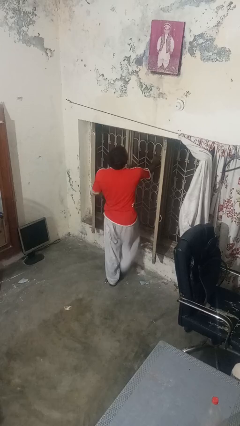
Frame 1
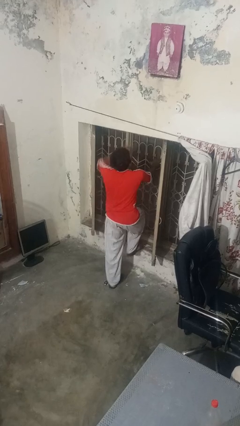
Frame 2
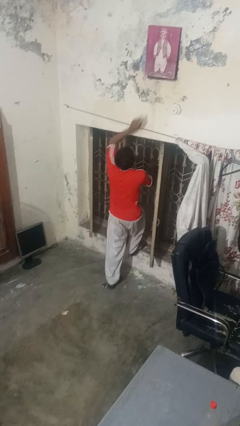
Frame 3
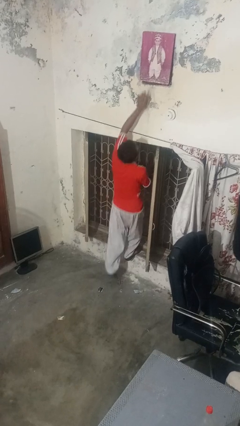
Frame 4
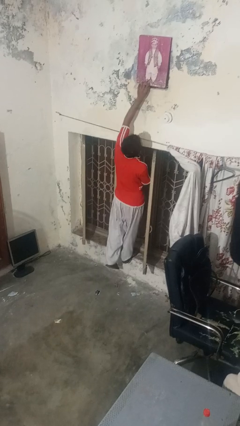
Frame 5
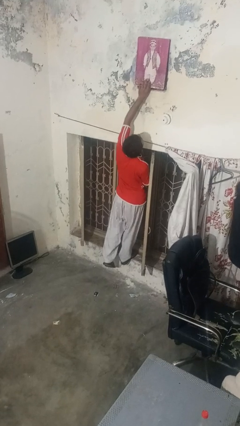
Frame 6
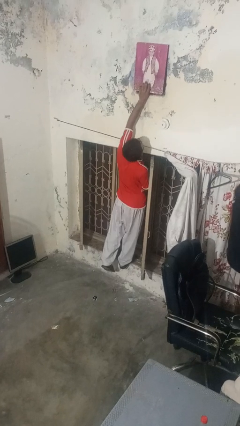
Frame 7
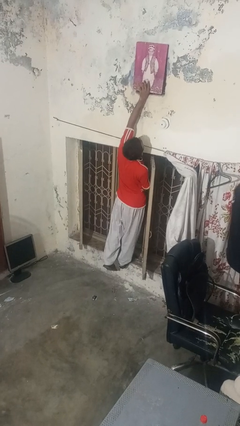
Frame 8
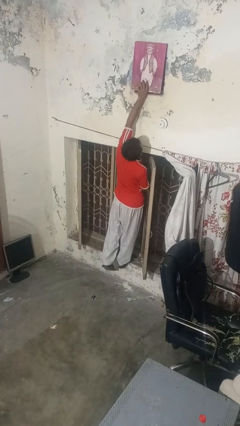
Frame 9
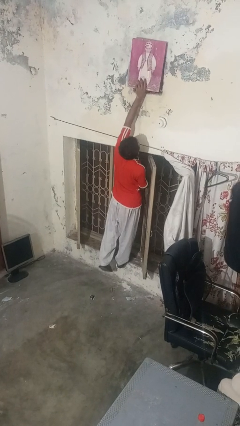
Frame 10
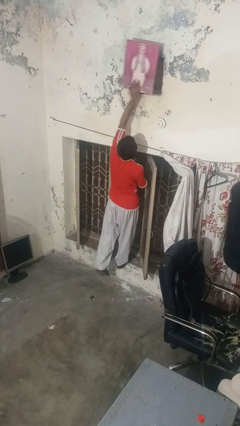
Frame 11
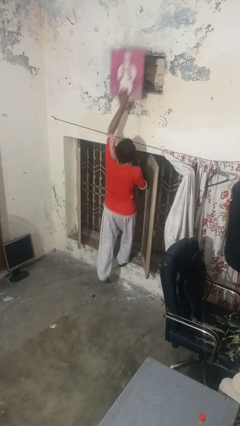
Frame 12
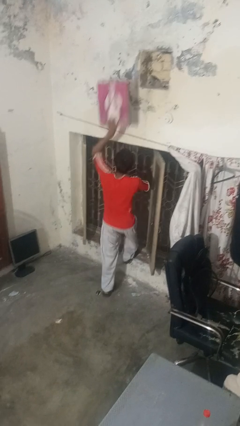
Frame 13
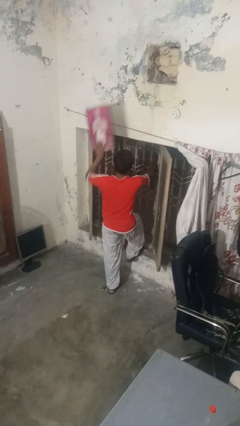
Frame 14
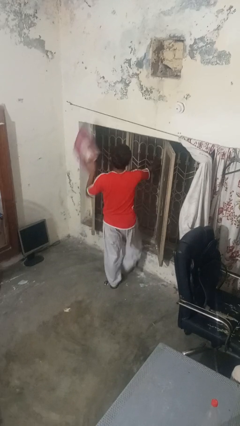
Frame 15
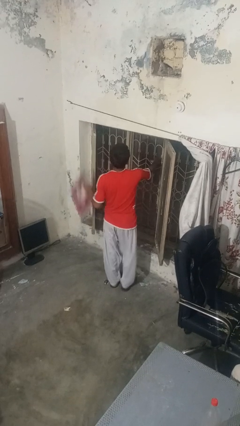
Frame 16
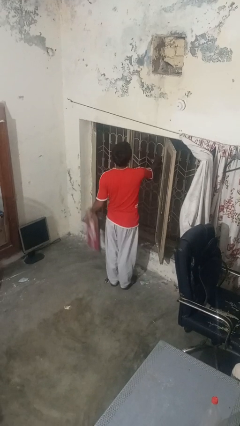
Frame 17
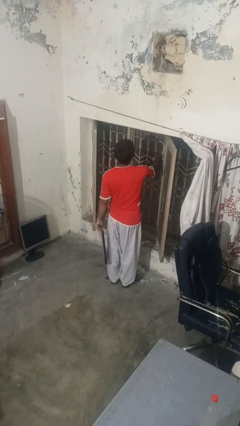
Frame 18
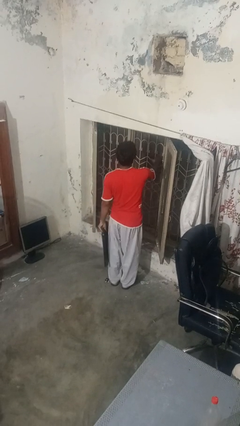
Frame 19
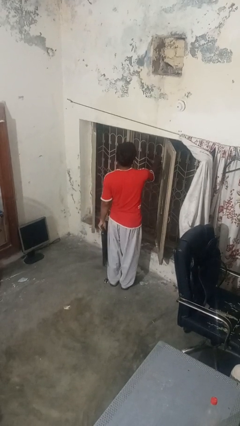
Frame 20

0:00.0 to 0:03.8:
person takes down picture frame

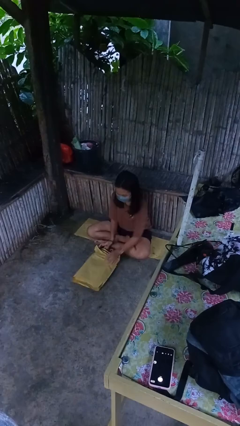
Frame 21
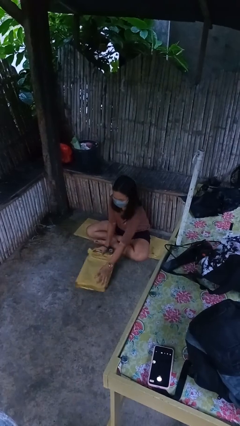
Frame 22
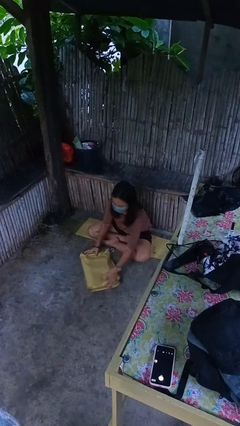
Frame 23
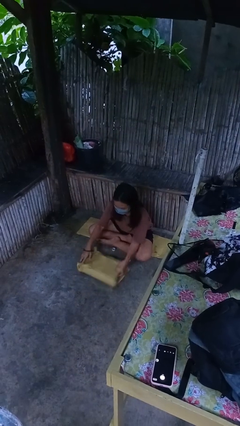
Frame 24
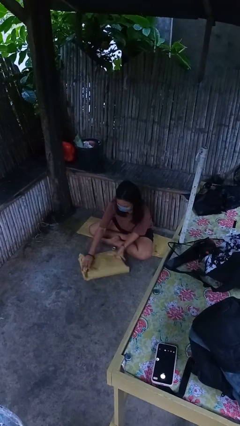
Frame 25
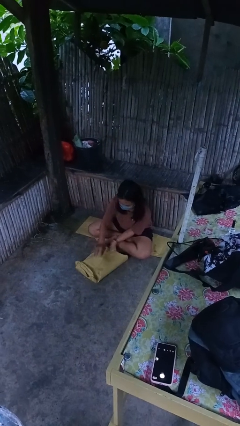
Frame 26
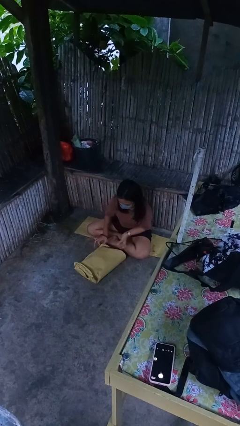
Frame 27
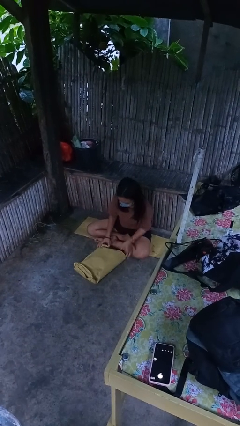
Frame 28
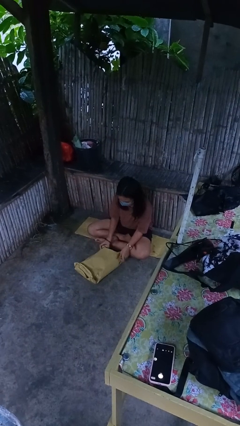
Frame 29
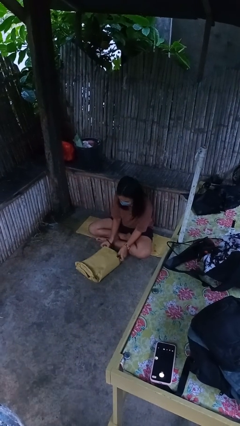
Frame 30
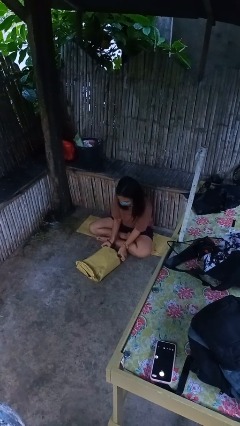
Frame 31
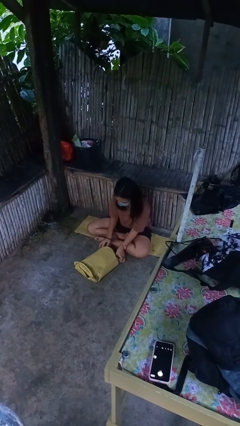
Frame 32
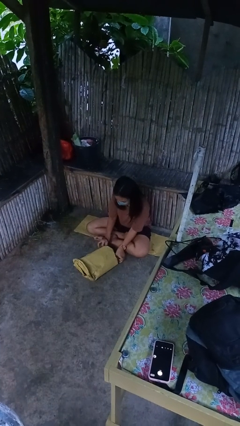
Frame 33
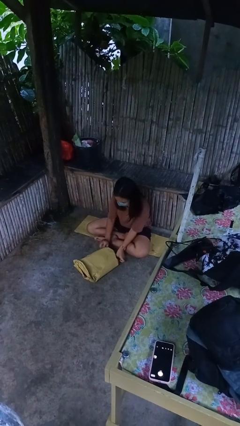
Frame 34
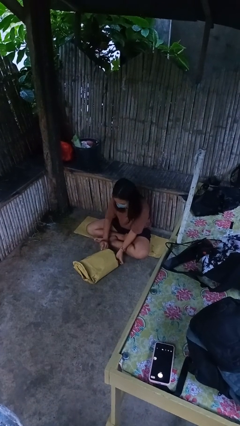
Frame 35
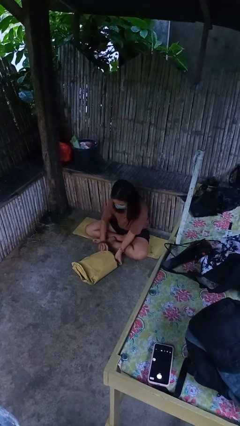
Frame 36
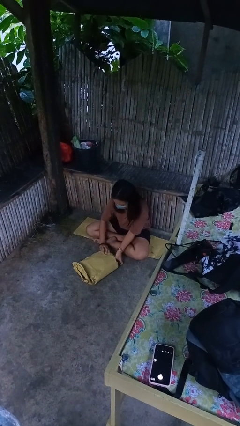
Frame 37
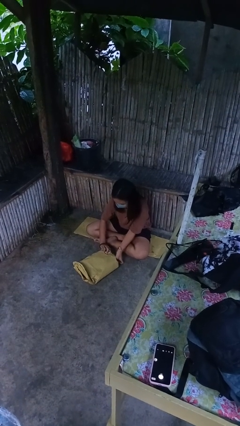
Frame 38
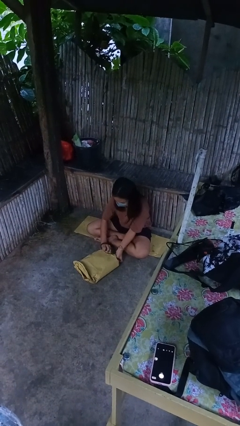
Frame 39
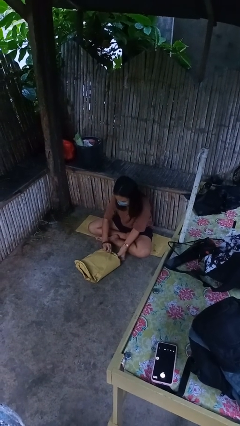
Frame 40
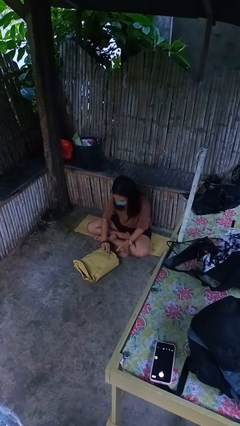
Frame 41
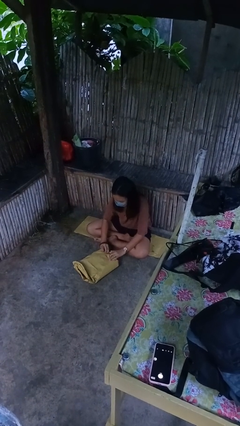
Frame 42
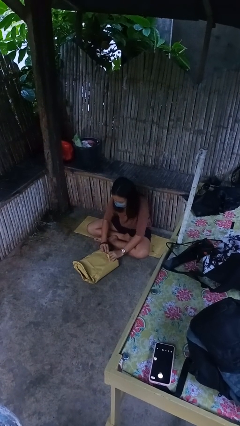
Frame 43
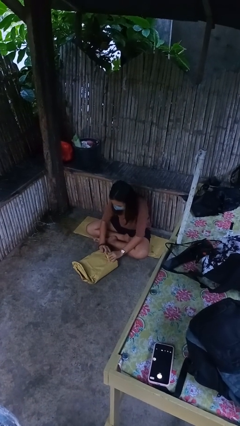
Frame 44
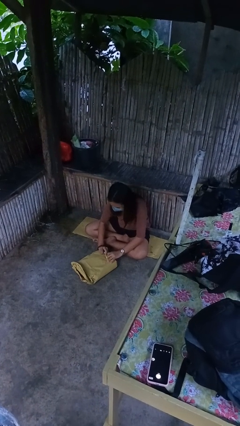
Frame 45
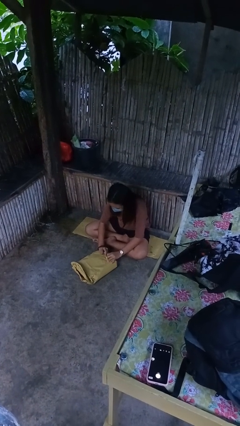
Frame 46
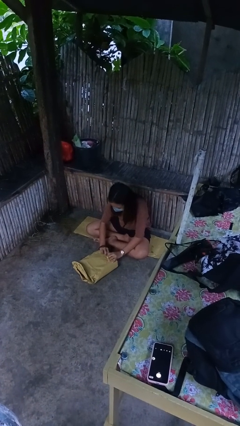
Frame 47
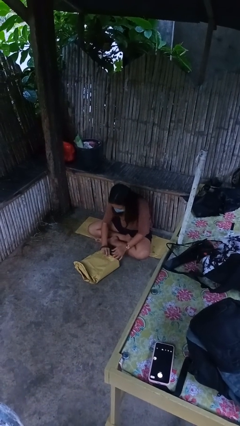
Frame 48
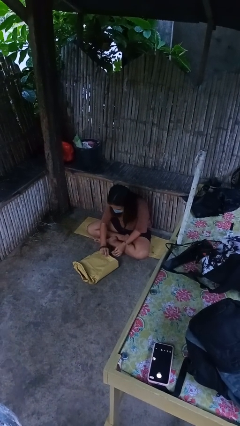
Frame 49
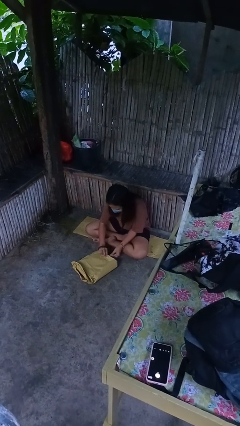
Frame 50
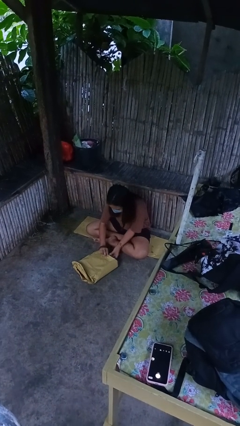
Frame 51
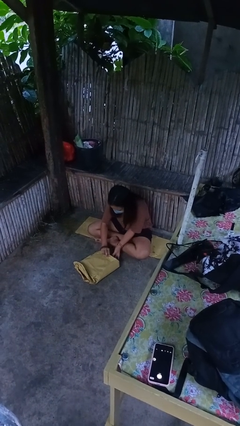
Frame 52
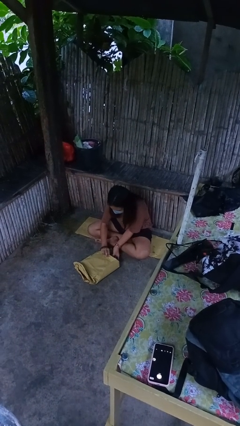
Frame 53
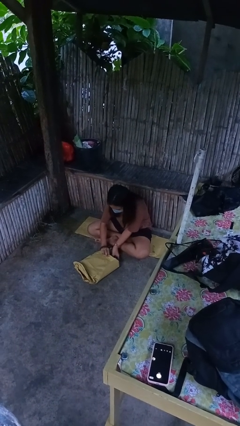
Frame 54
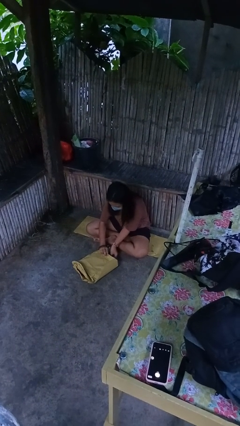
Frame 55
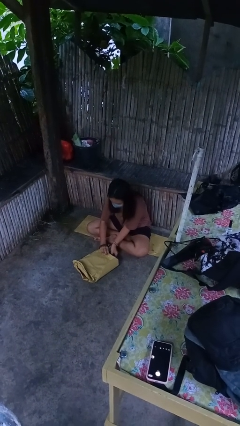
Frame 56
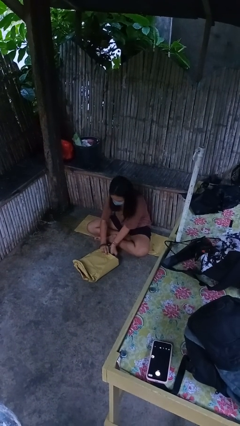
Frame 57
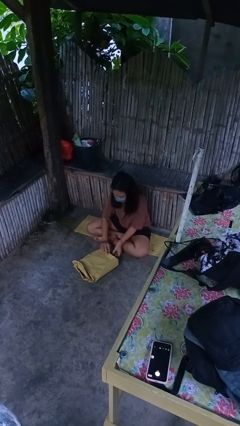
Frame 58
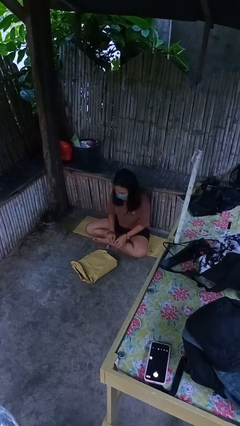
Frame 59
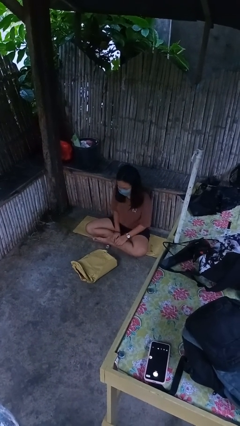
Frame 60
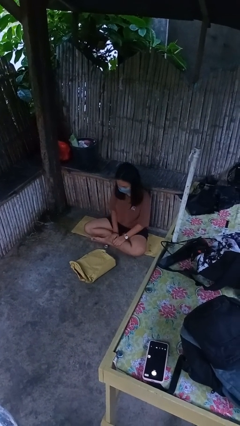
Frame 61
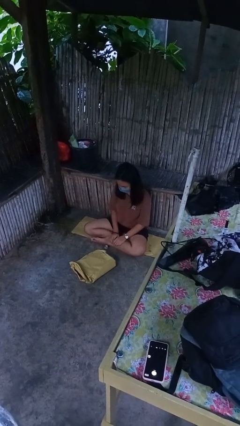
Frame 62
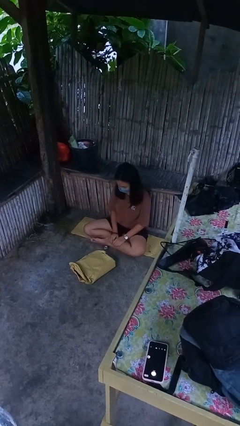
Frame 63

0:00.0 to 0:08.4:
person wraps box

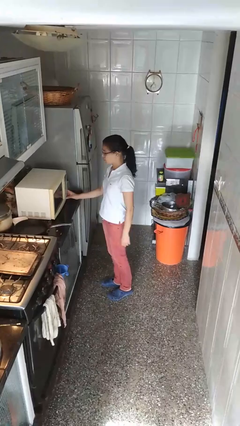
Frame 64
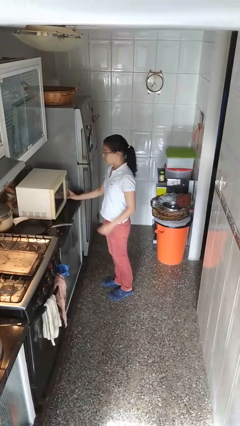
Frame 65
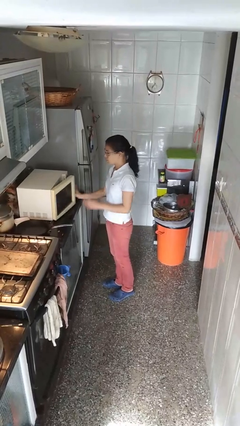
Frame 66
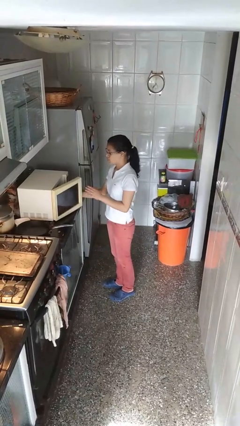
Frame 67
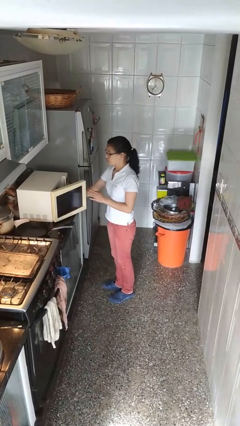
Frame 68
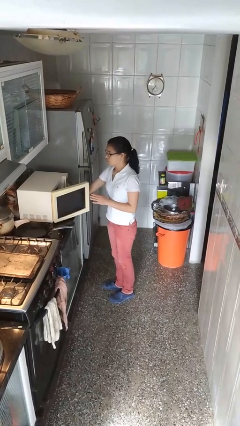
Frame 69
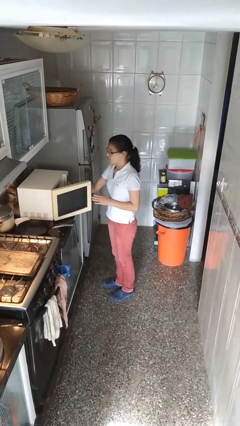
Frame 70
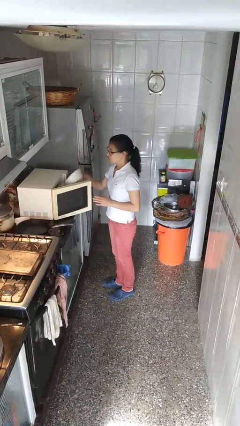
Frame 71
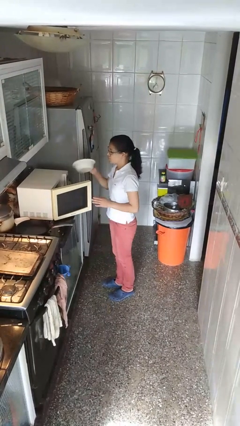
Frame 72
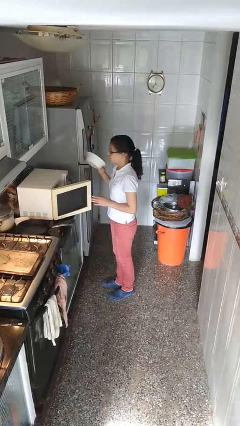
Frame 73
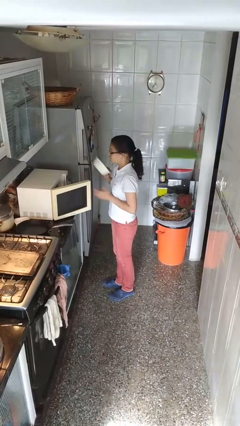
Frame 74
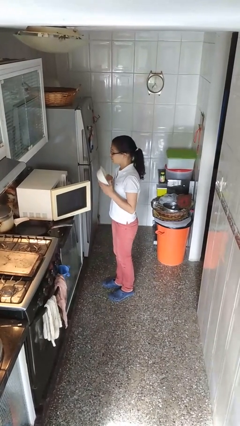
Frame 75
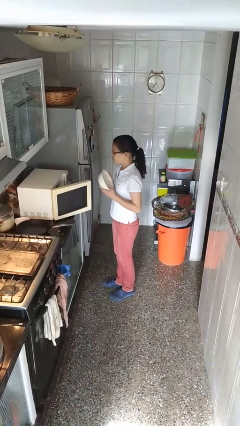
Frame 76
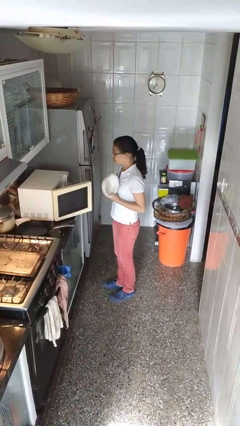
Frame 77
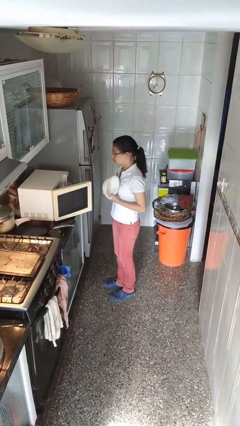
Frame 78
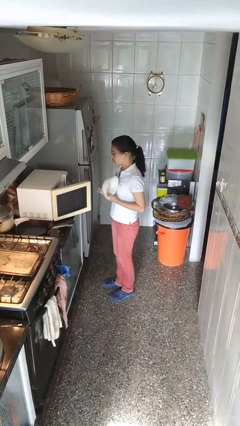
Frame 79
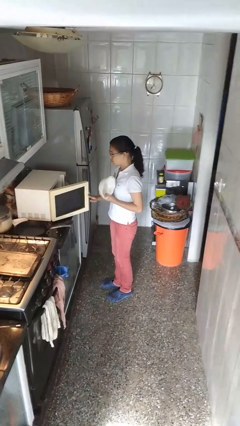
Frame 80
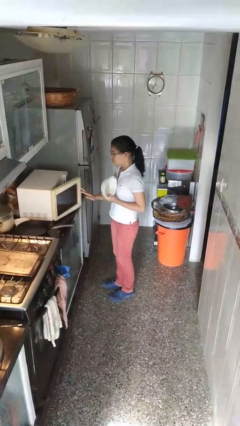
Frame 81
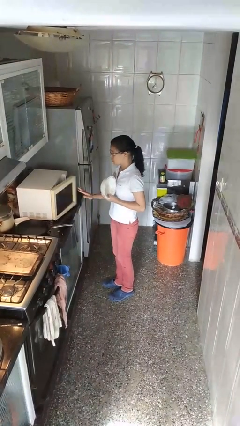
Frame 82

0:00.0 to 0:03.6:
person takes object from microwave

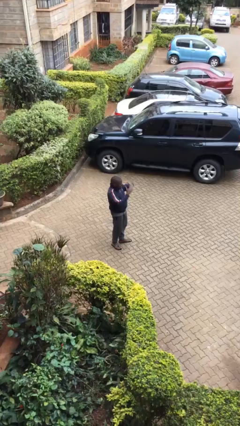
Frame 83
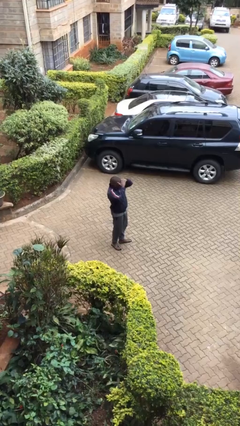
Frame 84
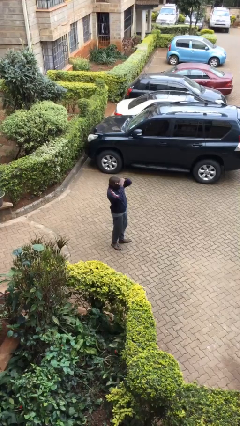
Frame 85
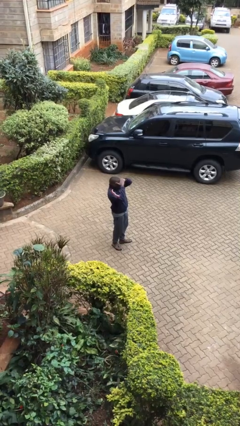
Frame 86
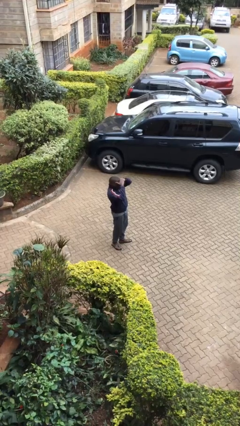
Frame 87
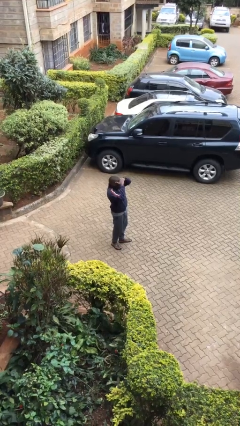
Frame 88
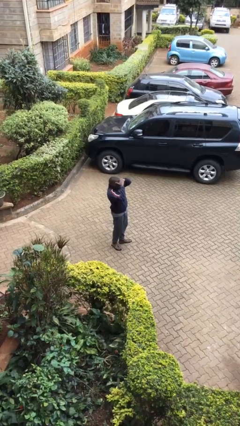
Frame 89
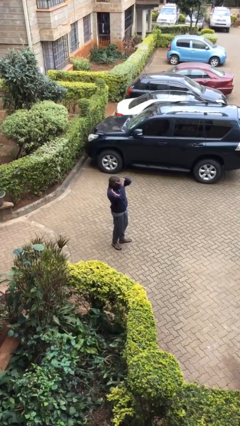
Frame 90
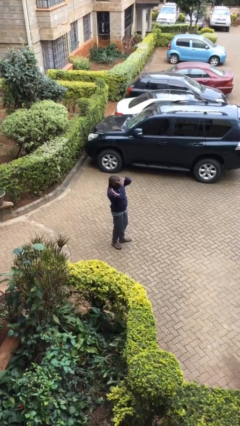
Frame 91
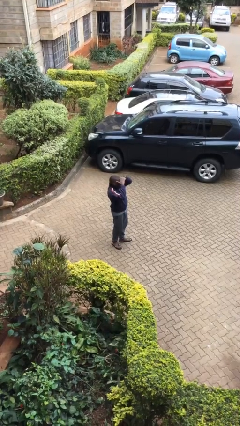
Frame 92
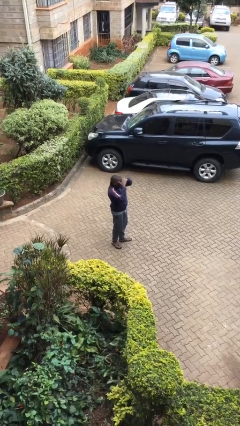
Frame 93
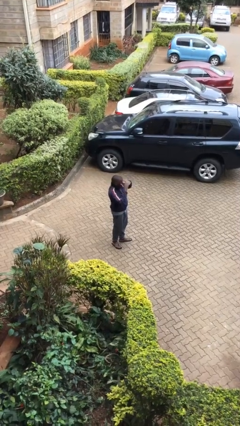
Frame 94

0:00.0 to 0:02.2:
person shades eyes
